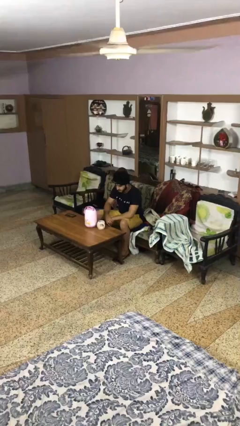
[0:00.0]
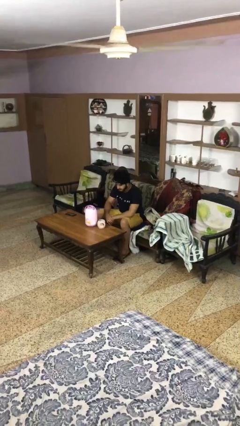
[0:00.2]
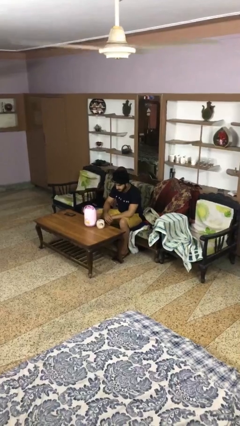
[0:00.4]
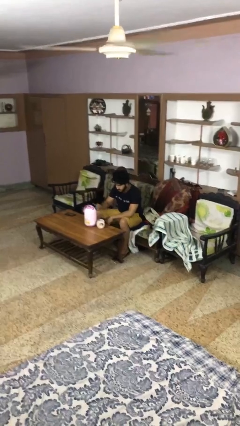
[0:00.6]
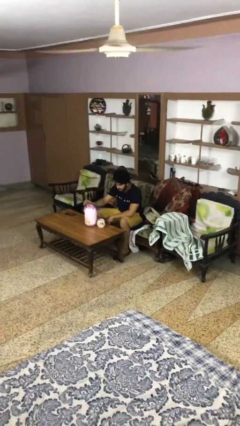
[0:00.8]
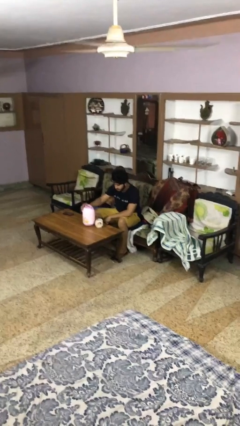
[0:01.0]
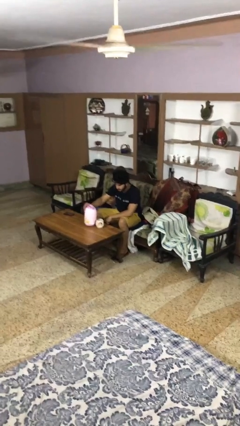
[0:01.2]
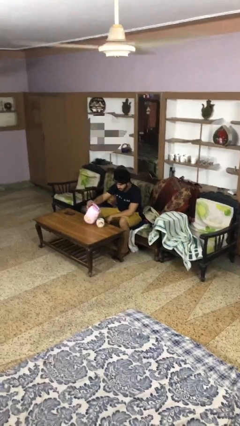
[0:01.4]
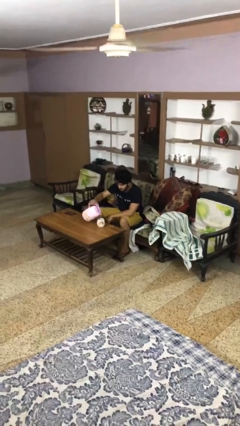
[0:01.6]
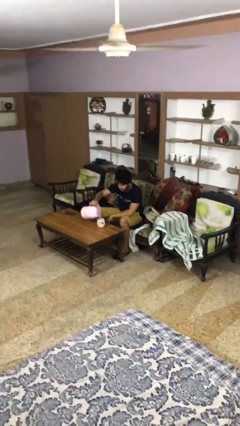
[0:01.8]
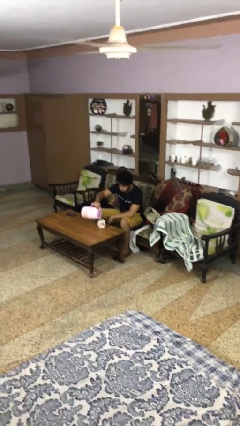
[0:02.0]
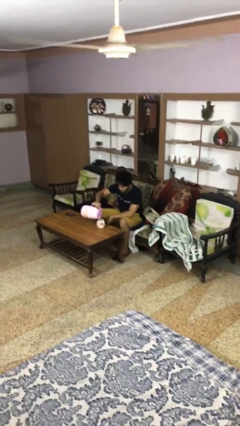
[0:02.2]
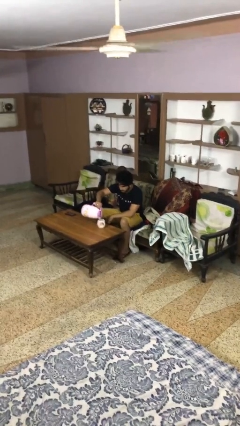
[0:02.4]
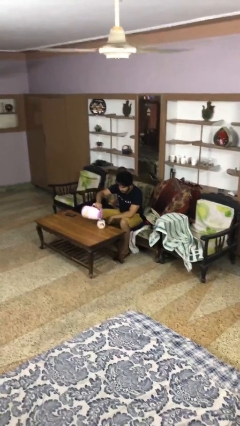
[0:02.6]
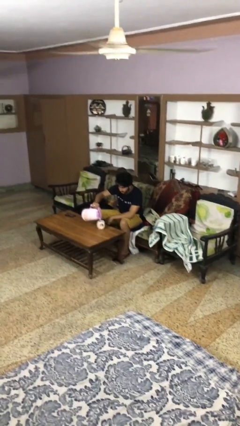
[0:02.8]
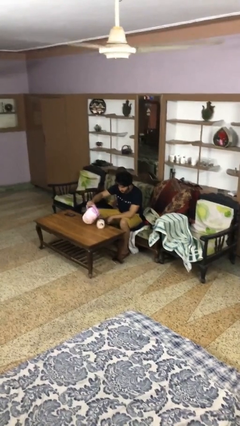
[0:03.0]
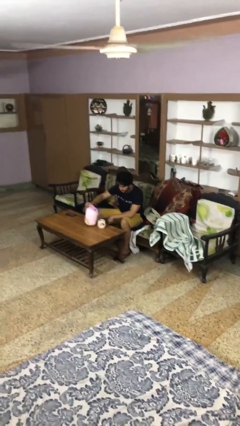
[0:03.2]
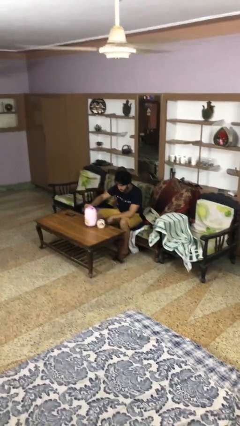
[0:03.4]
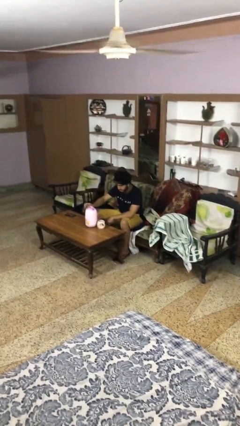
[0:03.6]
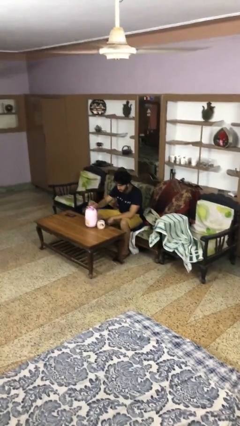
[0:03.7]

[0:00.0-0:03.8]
person pours coffee into mug

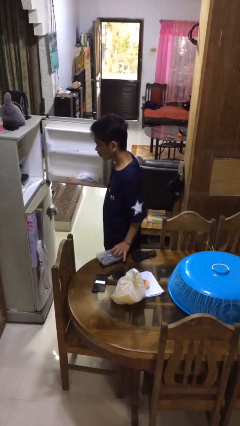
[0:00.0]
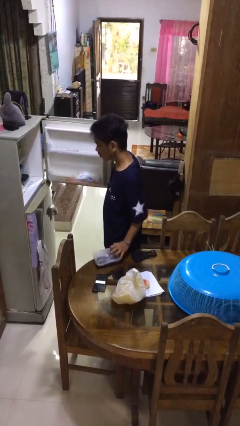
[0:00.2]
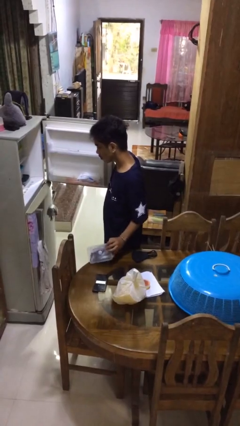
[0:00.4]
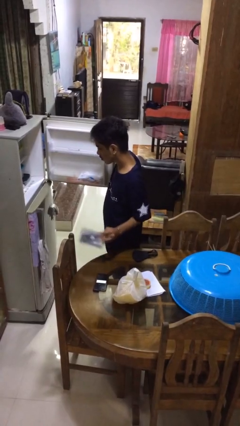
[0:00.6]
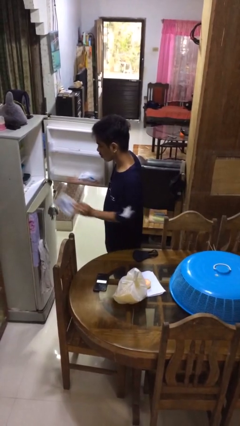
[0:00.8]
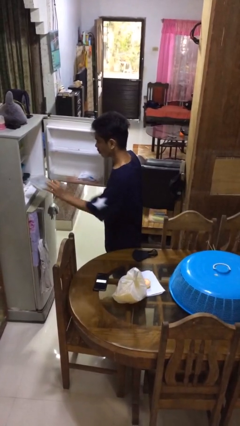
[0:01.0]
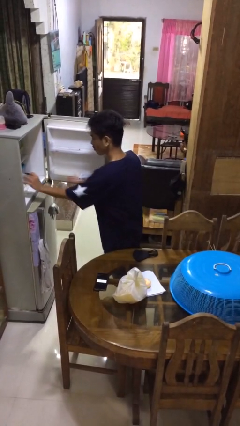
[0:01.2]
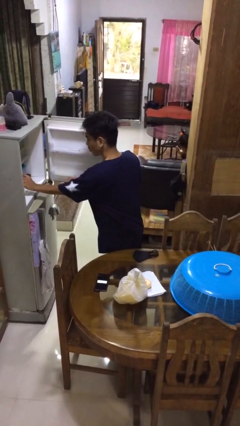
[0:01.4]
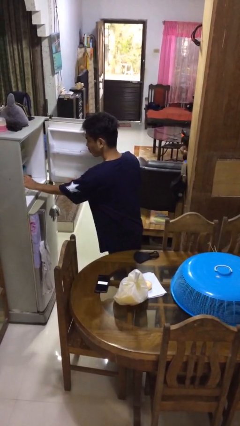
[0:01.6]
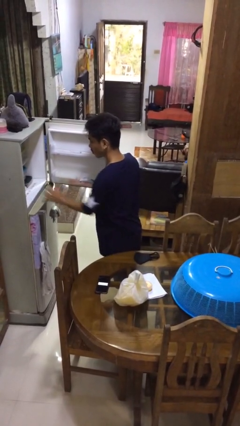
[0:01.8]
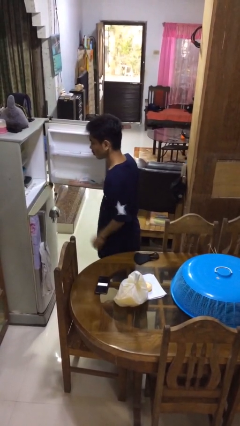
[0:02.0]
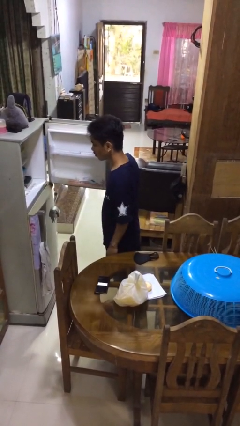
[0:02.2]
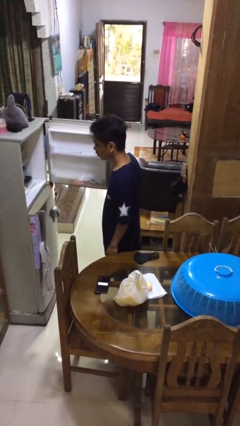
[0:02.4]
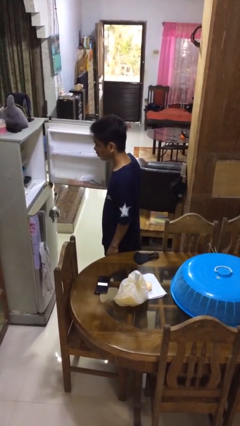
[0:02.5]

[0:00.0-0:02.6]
person puts object into refrigerator

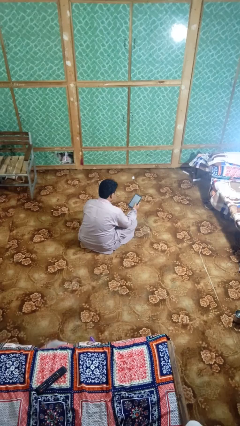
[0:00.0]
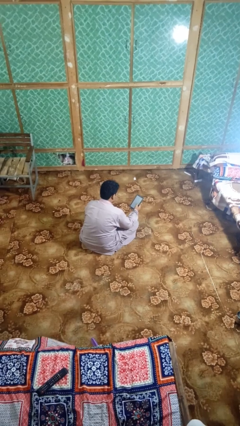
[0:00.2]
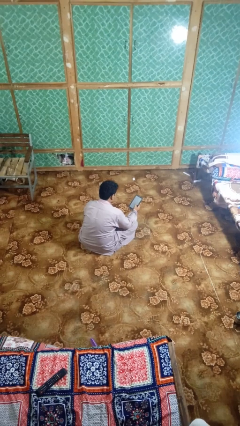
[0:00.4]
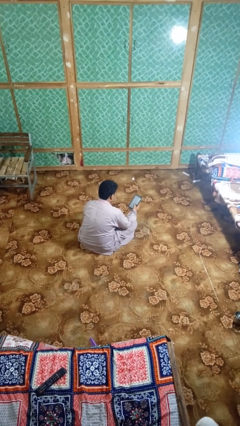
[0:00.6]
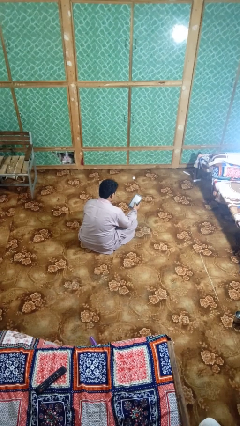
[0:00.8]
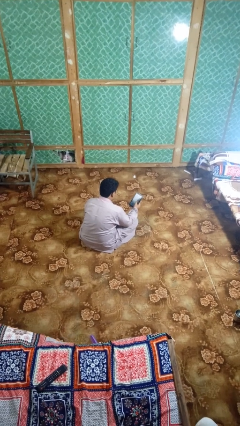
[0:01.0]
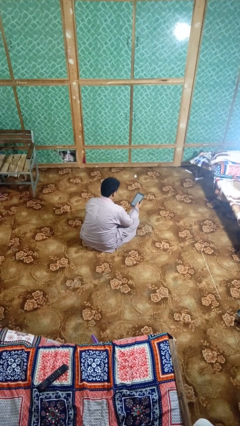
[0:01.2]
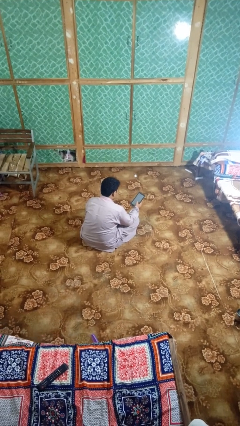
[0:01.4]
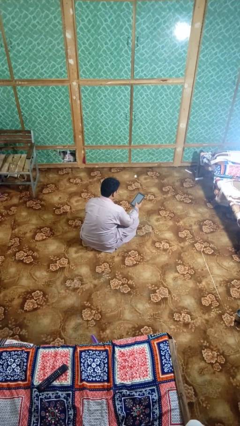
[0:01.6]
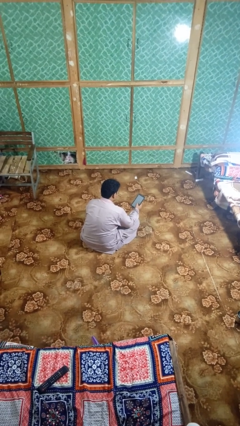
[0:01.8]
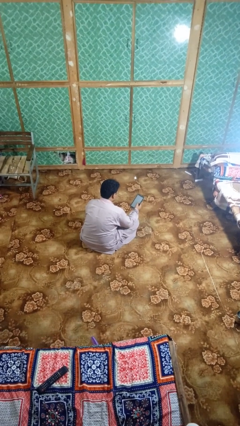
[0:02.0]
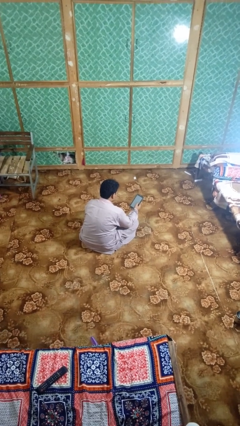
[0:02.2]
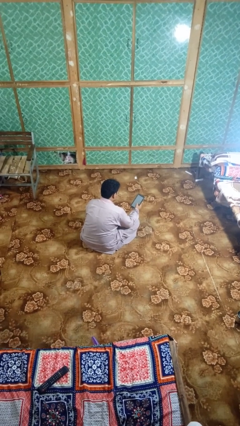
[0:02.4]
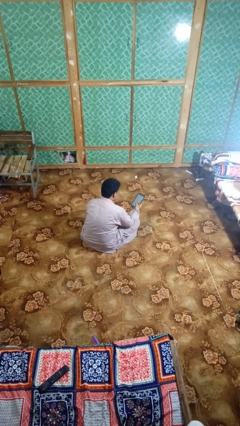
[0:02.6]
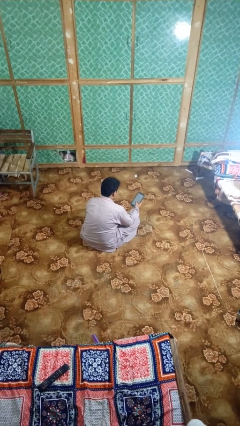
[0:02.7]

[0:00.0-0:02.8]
person interacts with tablet

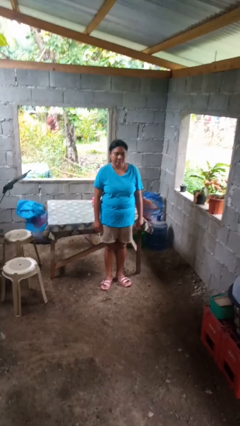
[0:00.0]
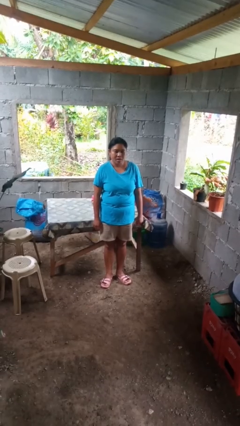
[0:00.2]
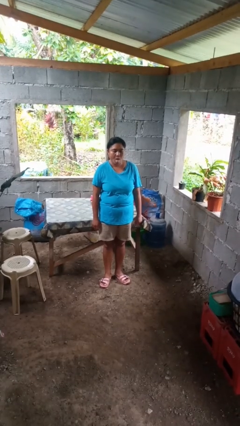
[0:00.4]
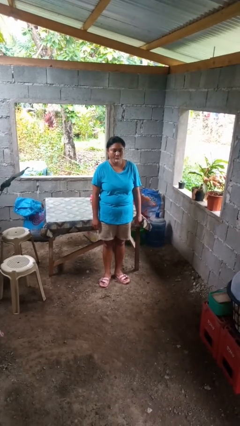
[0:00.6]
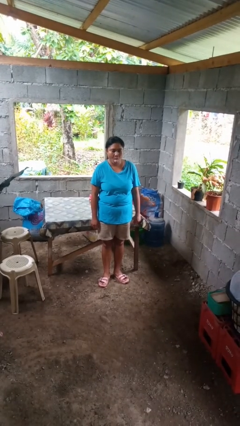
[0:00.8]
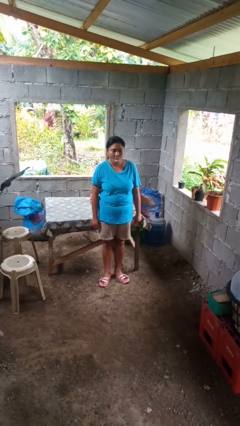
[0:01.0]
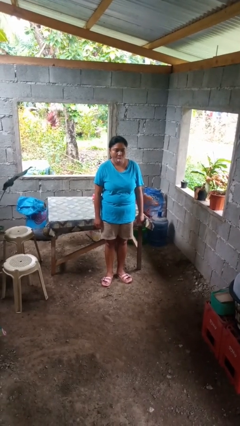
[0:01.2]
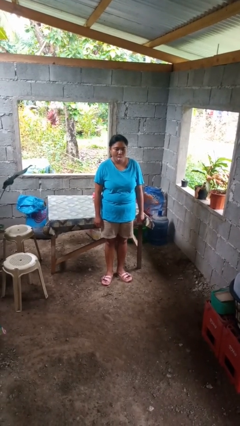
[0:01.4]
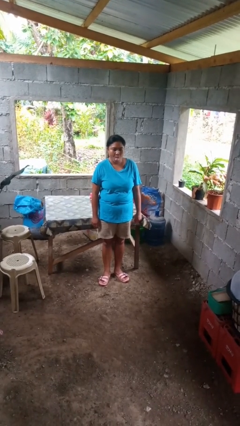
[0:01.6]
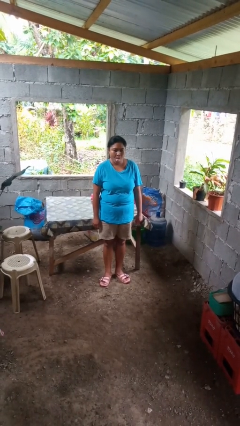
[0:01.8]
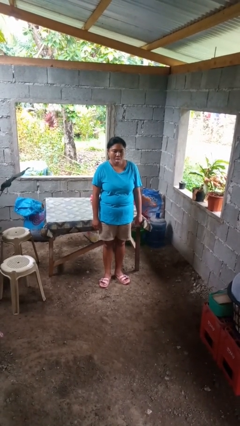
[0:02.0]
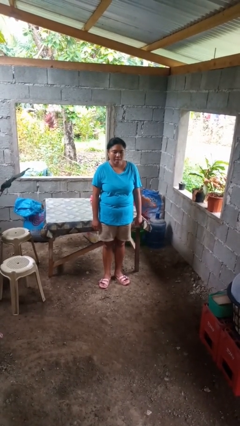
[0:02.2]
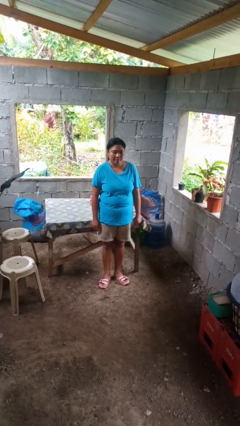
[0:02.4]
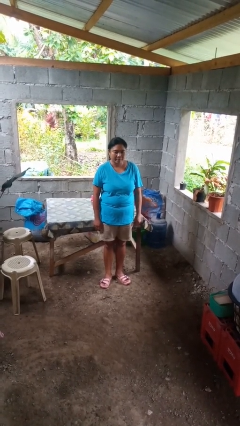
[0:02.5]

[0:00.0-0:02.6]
person sticks out tongue

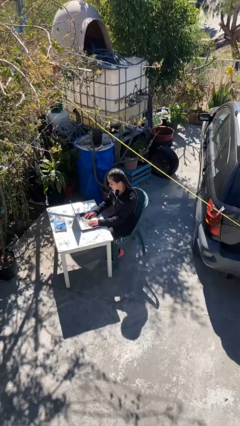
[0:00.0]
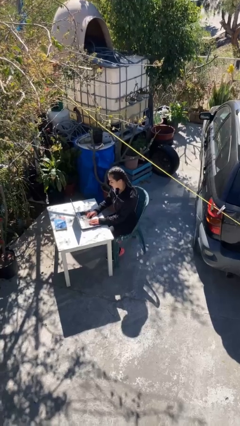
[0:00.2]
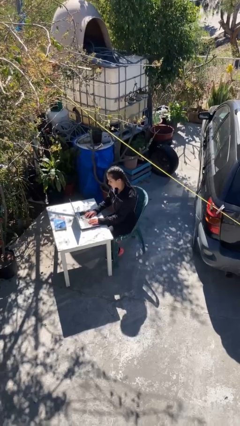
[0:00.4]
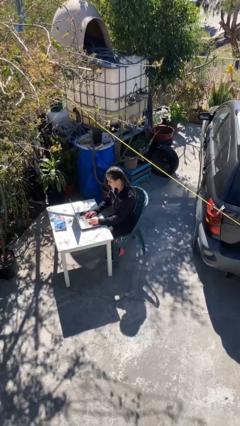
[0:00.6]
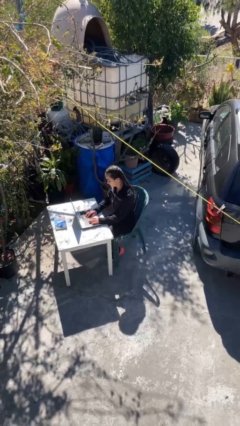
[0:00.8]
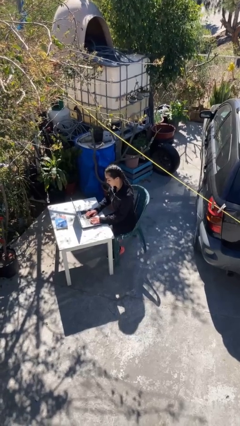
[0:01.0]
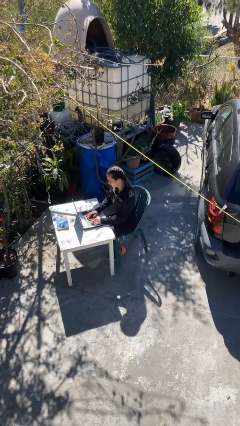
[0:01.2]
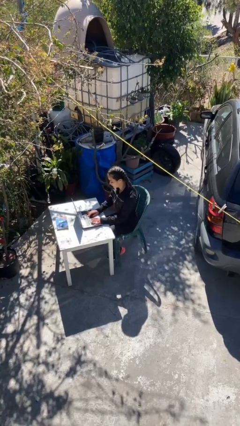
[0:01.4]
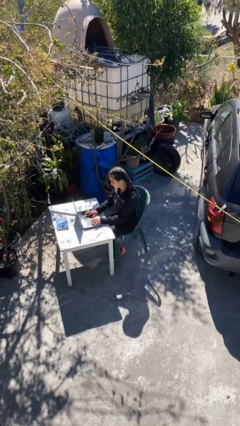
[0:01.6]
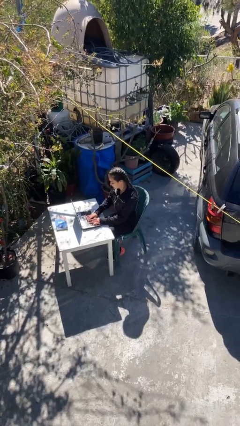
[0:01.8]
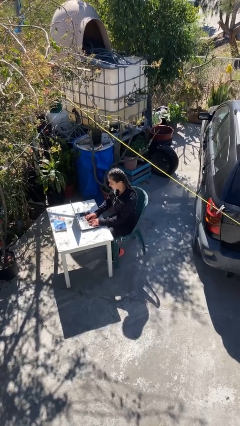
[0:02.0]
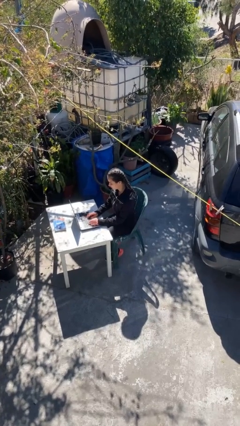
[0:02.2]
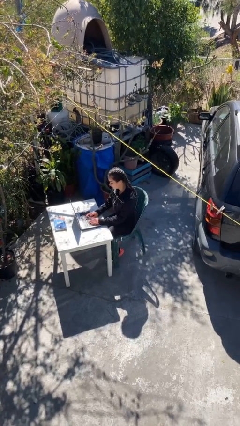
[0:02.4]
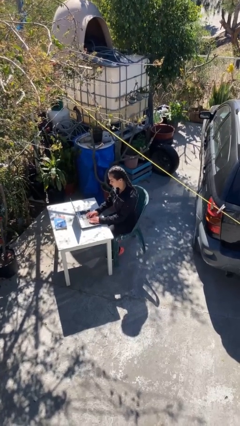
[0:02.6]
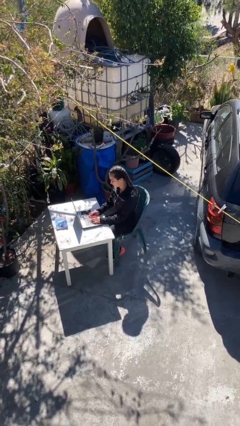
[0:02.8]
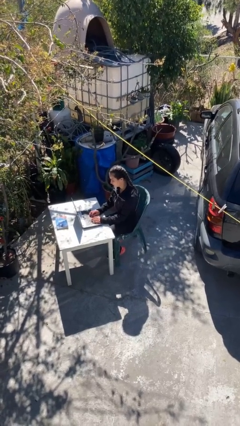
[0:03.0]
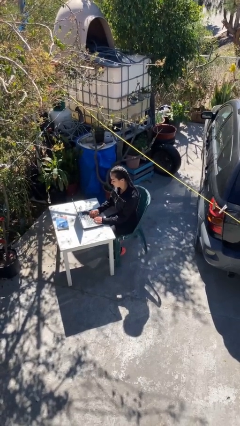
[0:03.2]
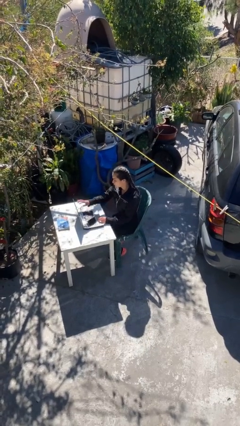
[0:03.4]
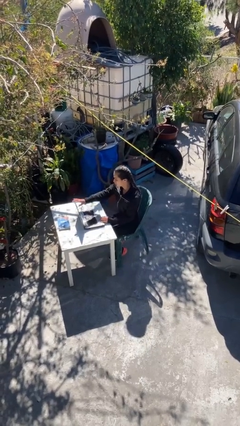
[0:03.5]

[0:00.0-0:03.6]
person interacts with laptop

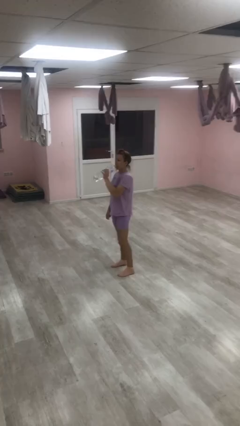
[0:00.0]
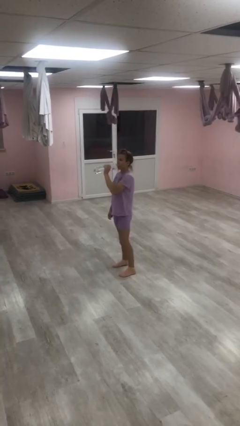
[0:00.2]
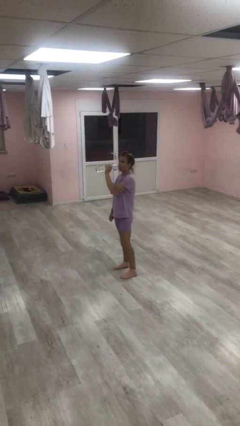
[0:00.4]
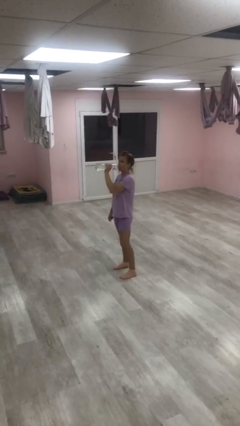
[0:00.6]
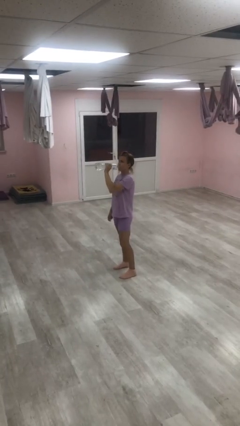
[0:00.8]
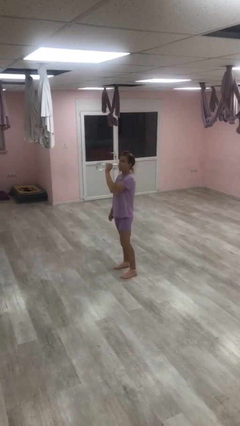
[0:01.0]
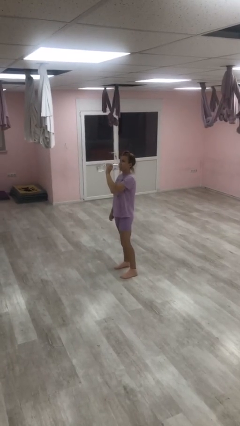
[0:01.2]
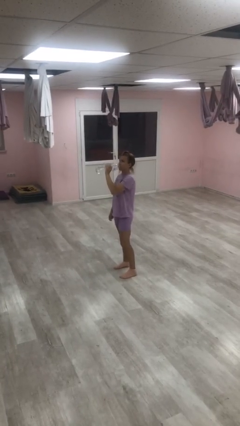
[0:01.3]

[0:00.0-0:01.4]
person drinks from bottle
